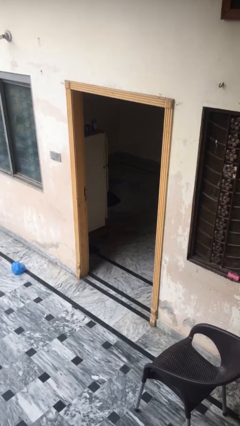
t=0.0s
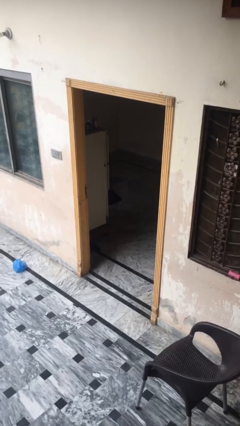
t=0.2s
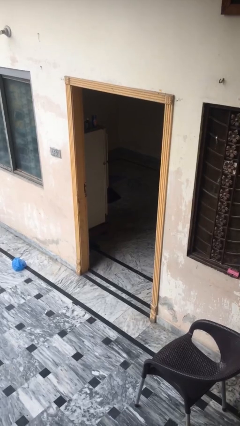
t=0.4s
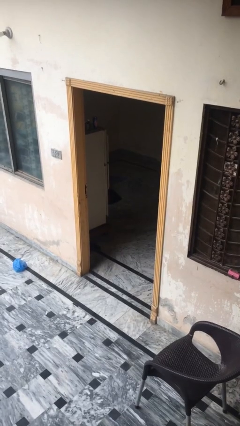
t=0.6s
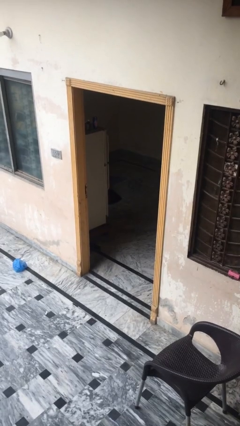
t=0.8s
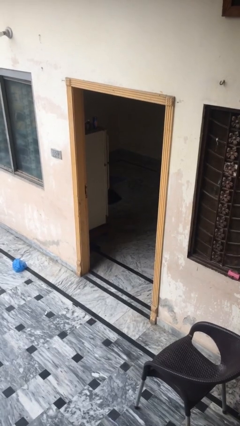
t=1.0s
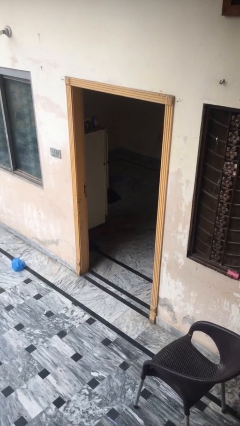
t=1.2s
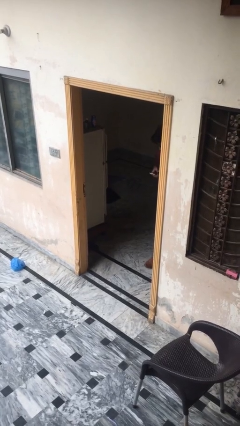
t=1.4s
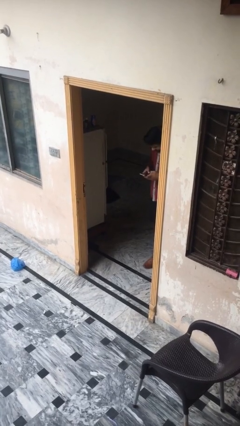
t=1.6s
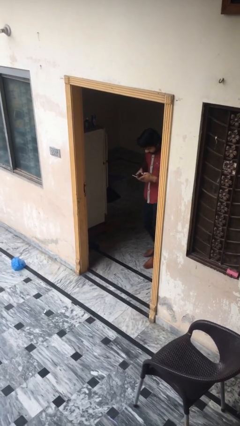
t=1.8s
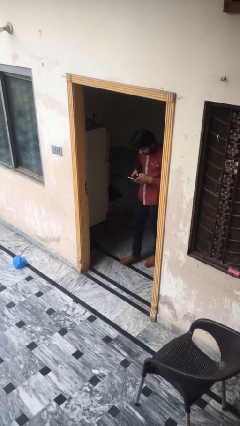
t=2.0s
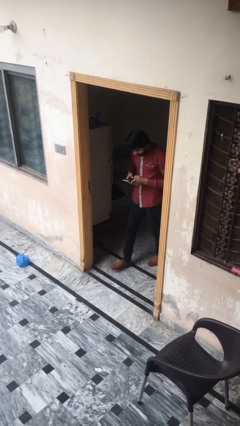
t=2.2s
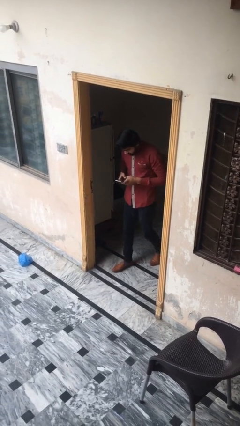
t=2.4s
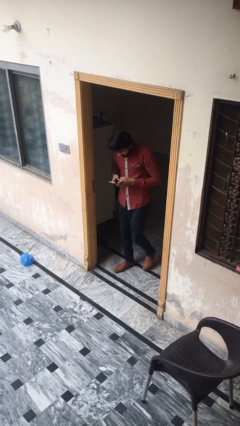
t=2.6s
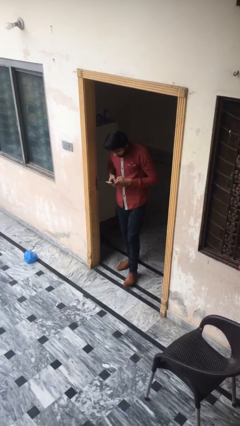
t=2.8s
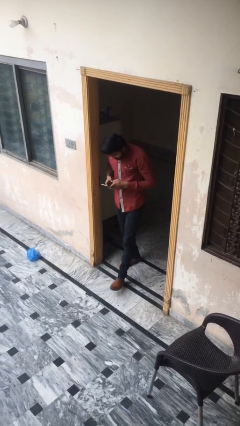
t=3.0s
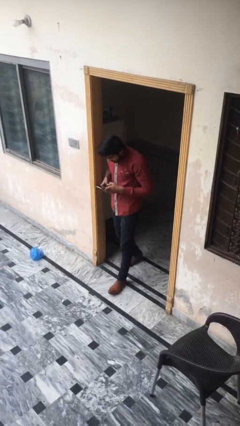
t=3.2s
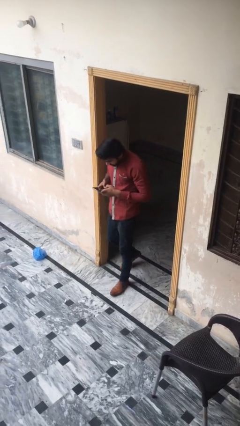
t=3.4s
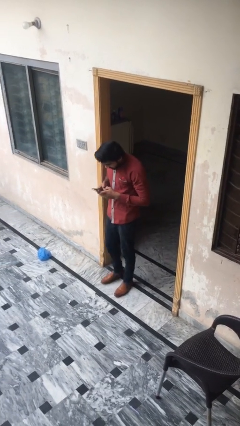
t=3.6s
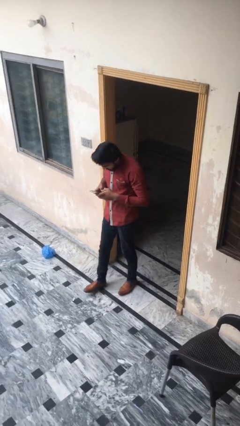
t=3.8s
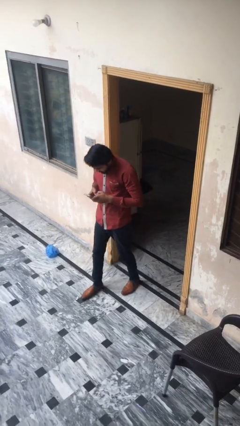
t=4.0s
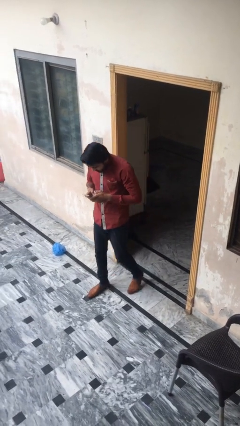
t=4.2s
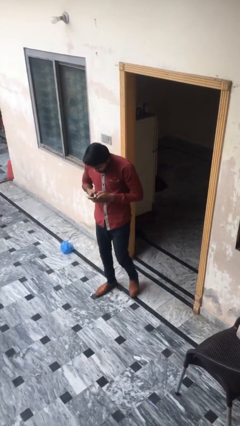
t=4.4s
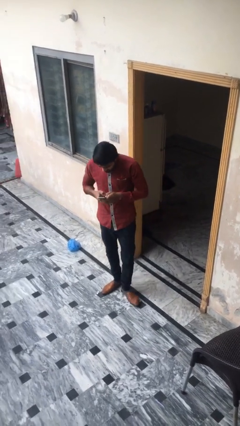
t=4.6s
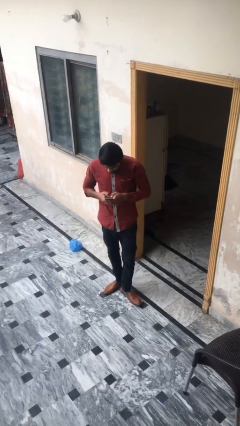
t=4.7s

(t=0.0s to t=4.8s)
person enters scene through structure

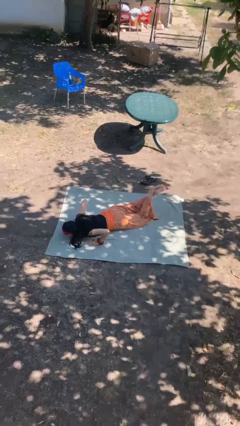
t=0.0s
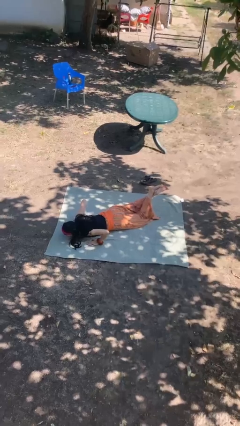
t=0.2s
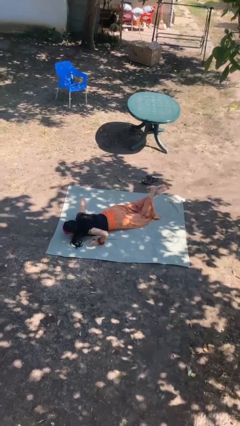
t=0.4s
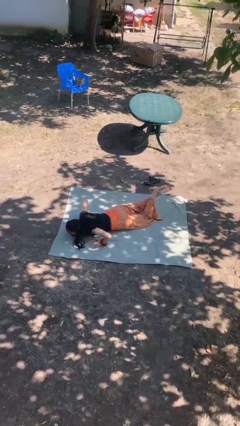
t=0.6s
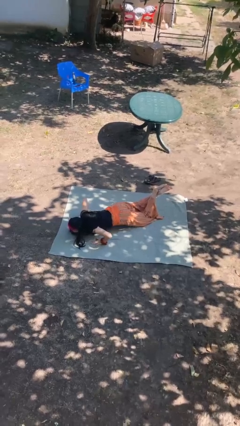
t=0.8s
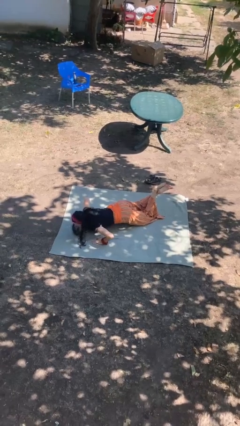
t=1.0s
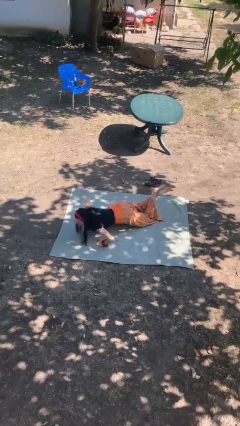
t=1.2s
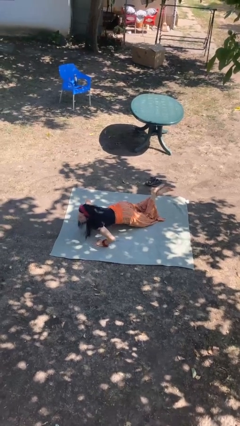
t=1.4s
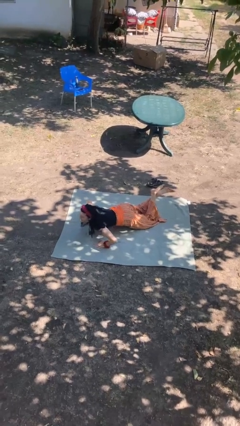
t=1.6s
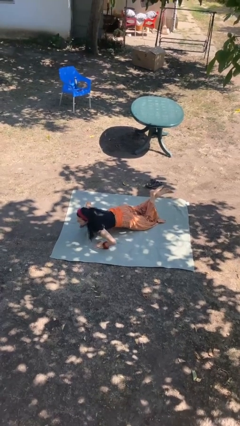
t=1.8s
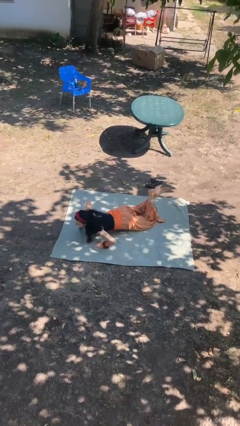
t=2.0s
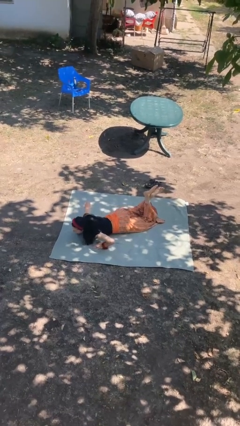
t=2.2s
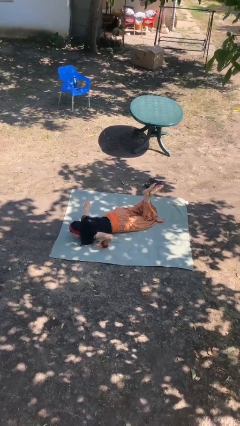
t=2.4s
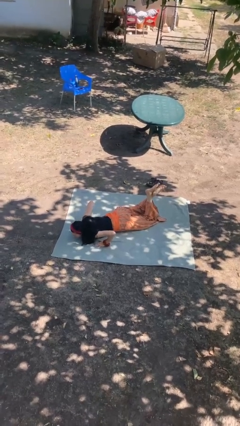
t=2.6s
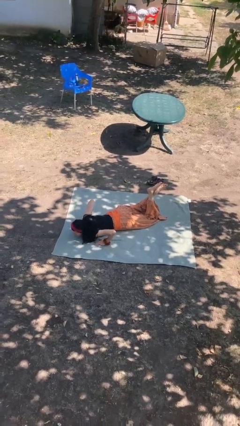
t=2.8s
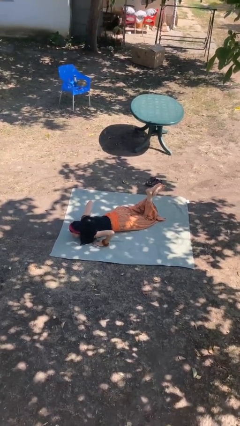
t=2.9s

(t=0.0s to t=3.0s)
person exercises with pushup

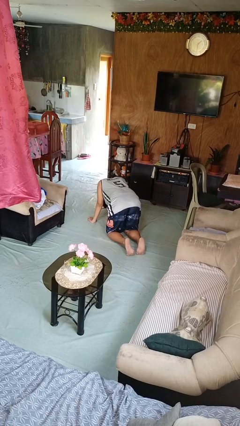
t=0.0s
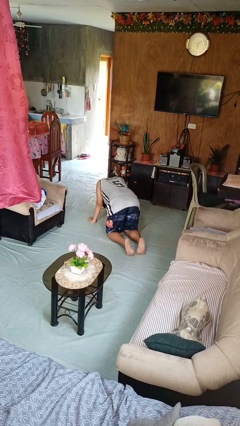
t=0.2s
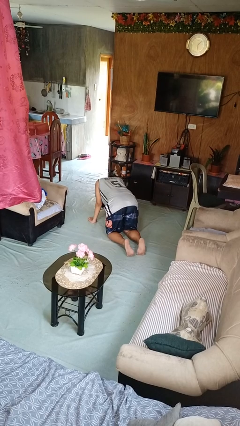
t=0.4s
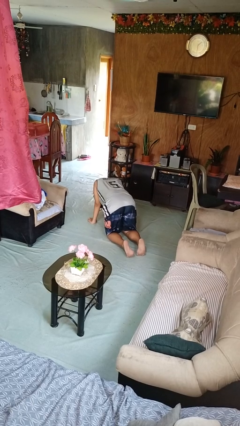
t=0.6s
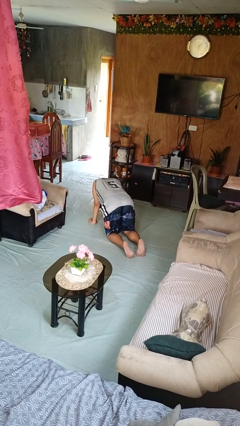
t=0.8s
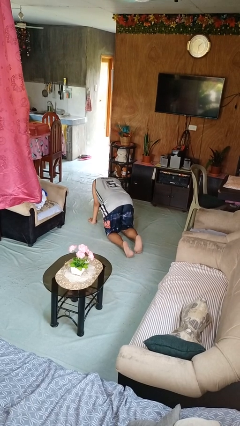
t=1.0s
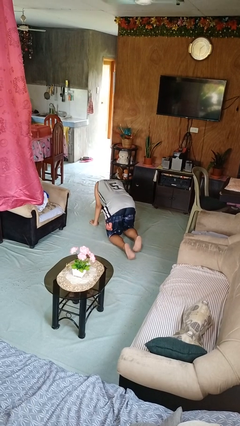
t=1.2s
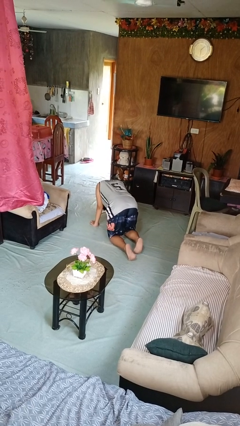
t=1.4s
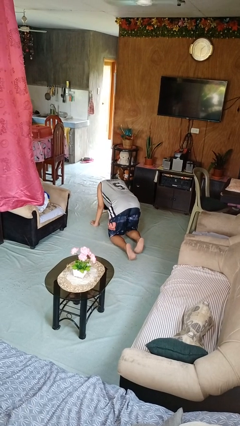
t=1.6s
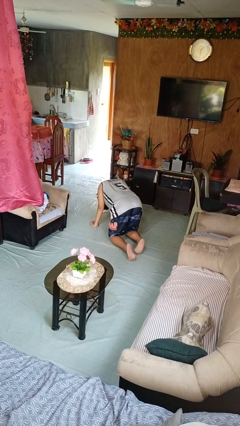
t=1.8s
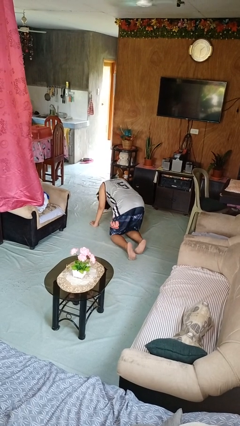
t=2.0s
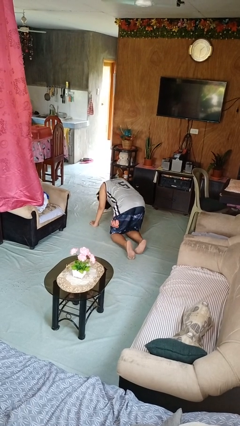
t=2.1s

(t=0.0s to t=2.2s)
person crawls

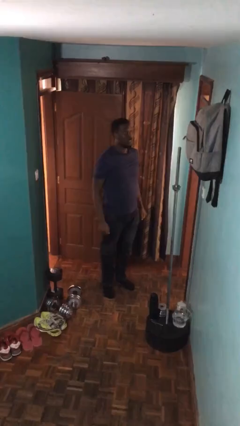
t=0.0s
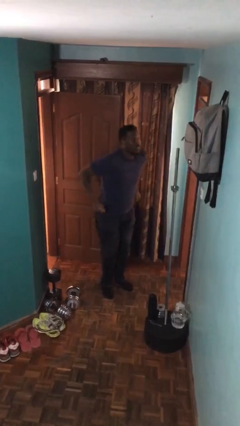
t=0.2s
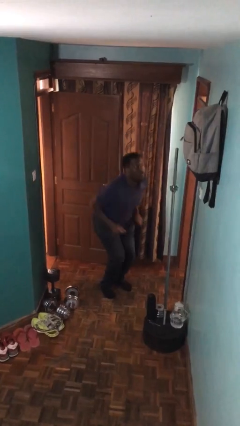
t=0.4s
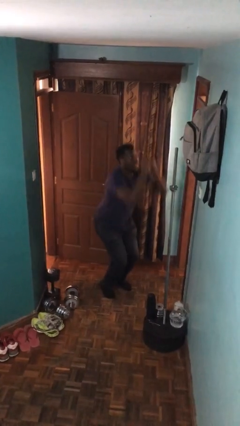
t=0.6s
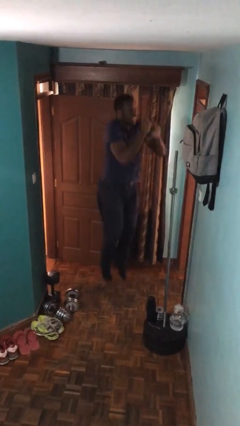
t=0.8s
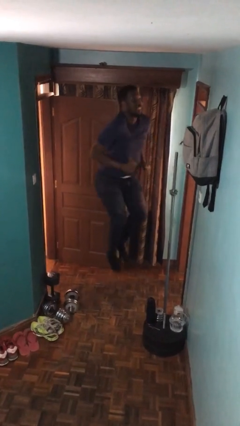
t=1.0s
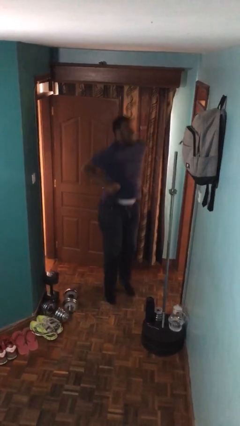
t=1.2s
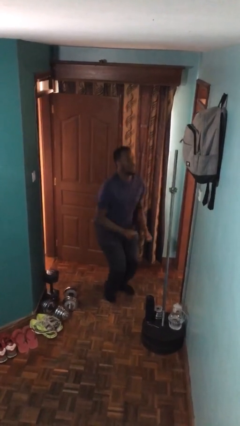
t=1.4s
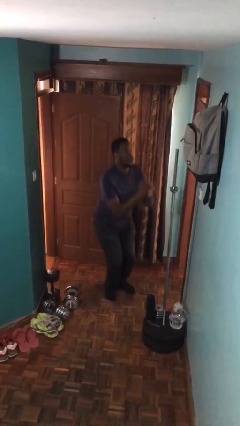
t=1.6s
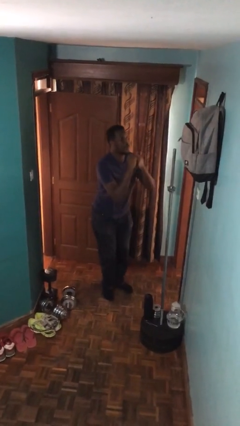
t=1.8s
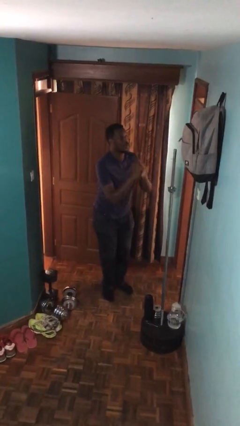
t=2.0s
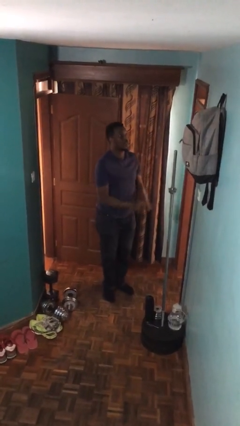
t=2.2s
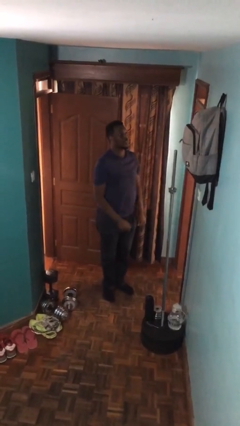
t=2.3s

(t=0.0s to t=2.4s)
person jumps

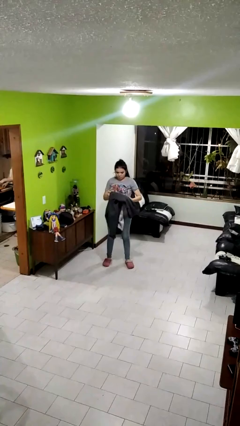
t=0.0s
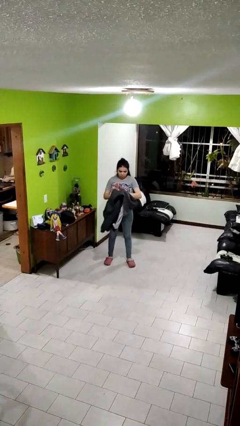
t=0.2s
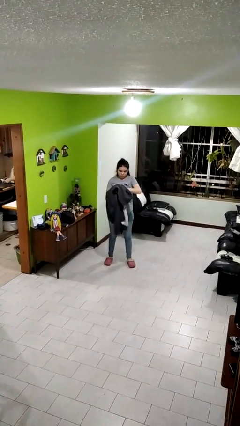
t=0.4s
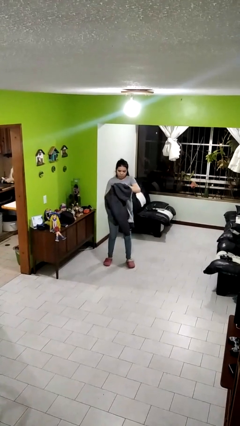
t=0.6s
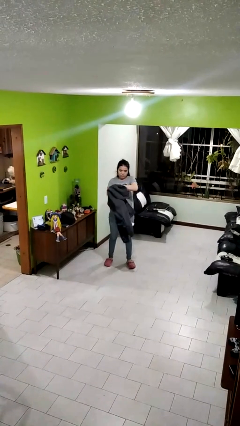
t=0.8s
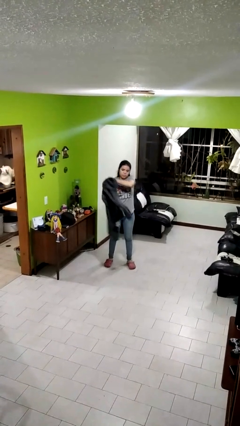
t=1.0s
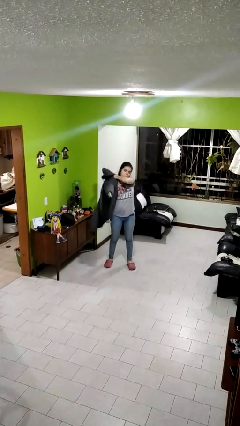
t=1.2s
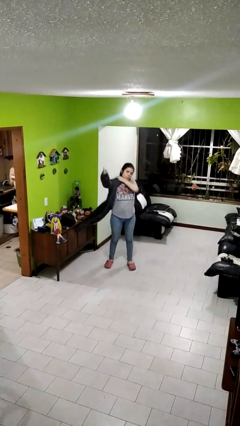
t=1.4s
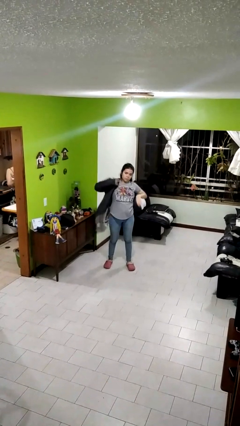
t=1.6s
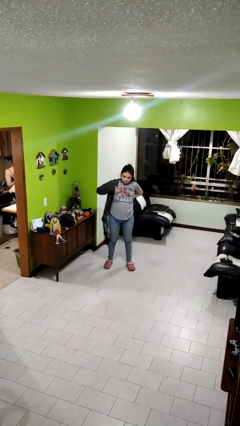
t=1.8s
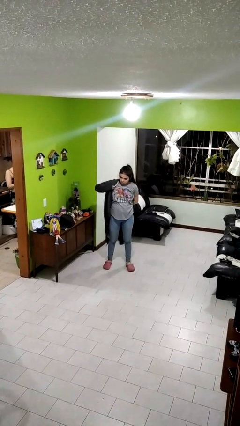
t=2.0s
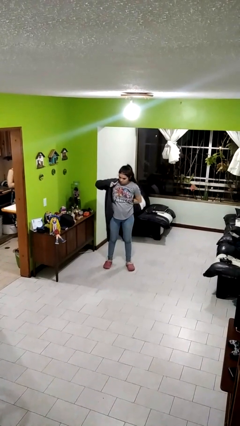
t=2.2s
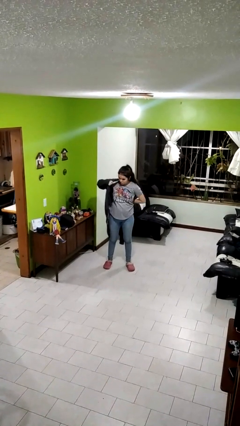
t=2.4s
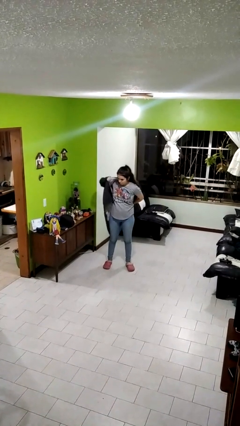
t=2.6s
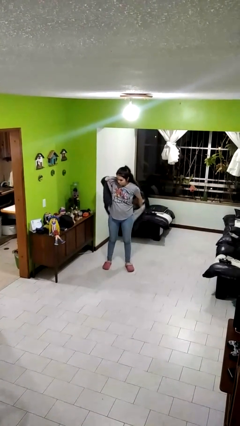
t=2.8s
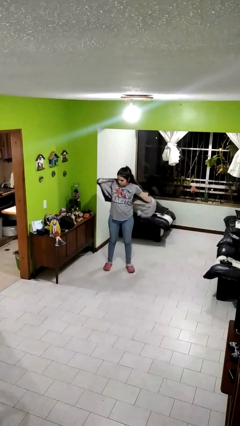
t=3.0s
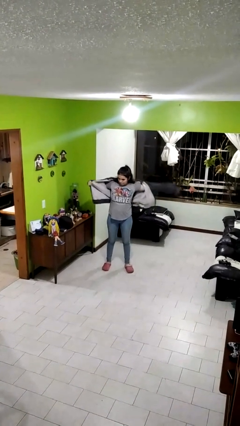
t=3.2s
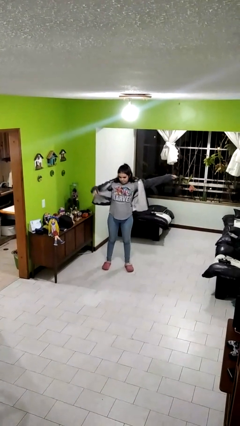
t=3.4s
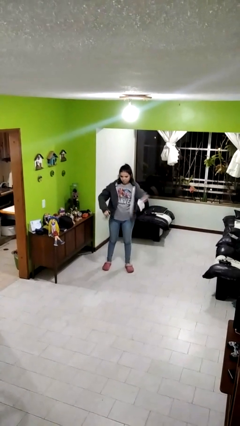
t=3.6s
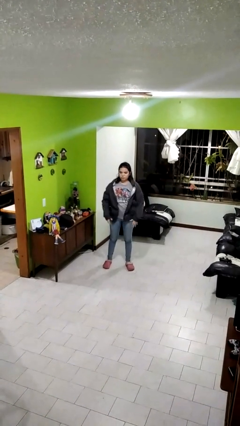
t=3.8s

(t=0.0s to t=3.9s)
person puts on jacket

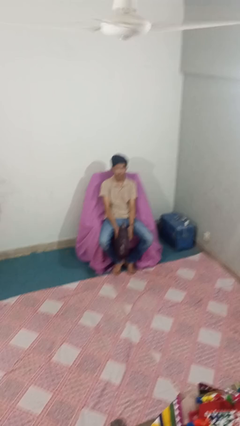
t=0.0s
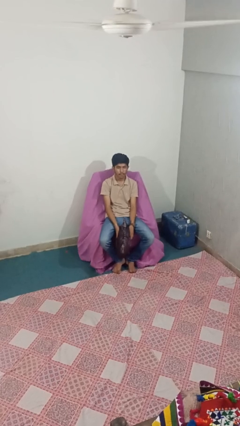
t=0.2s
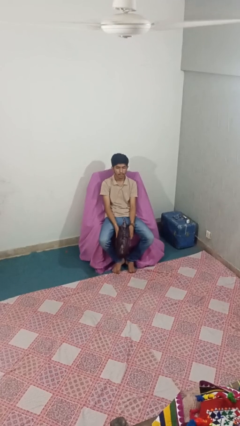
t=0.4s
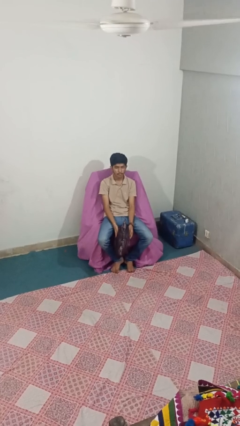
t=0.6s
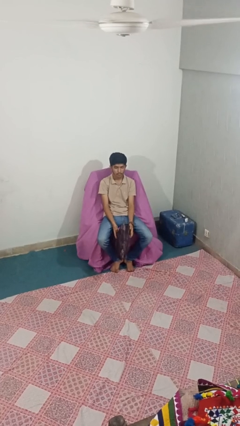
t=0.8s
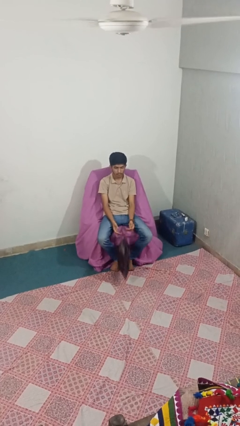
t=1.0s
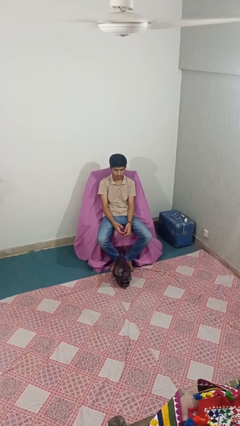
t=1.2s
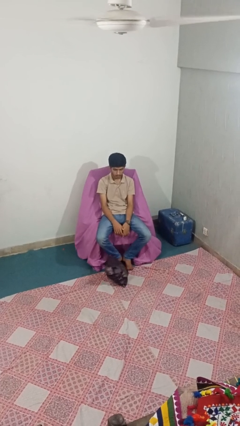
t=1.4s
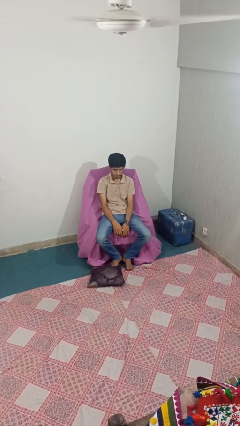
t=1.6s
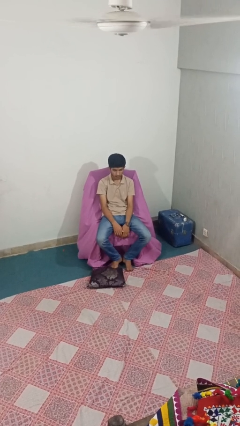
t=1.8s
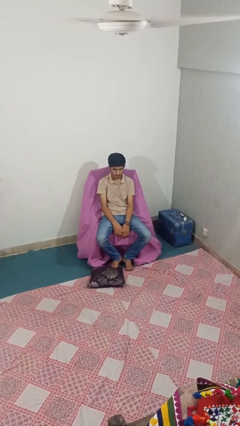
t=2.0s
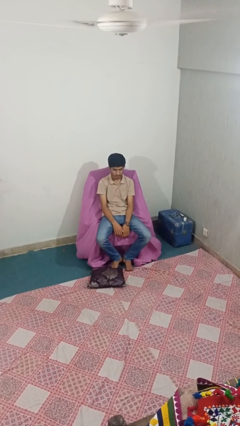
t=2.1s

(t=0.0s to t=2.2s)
person drops object
